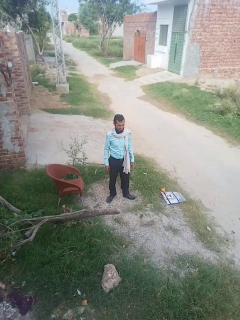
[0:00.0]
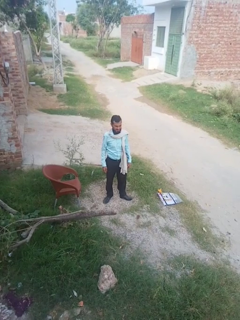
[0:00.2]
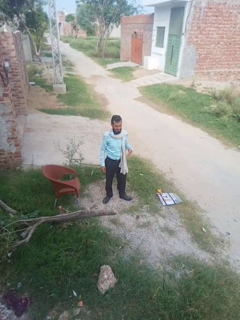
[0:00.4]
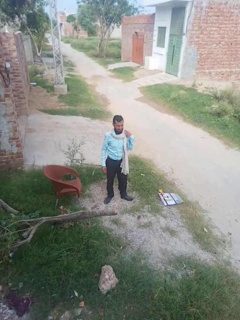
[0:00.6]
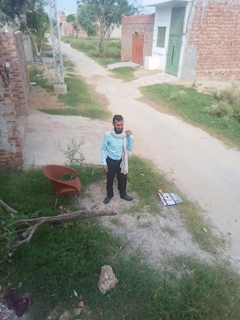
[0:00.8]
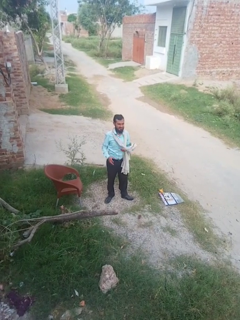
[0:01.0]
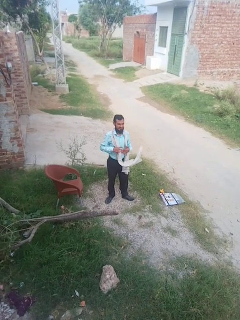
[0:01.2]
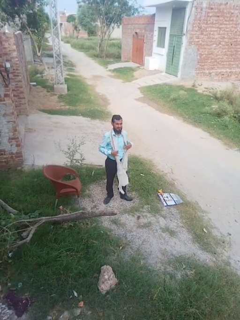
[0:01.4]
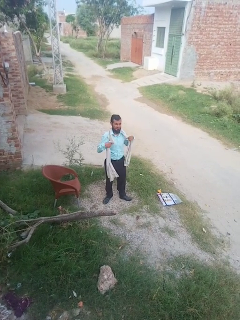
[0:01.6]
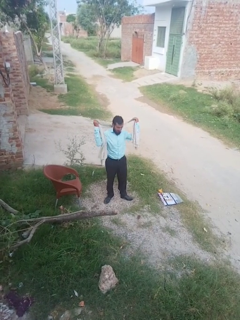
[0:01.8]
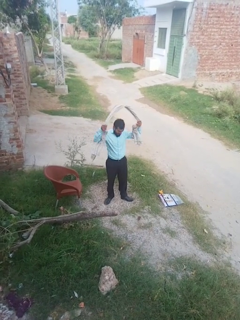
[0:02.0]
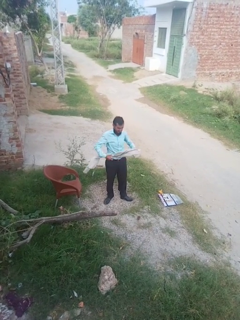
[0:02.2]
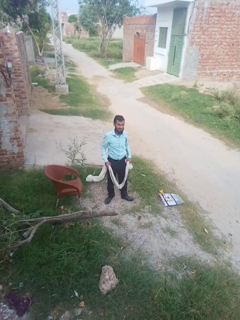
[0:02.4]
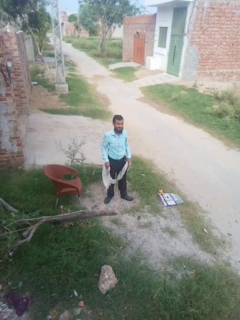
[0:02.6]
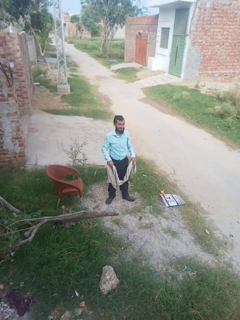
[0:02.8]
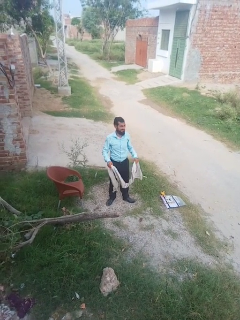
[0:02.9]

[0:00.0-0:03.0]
person takes off scarf

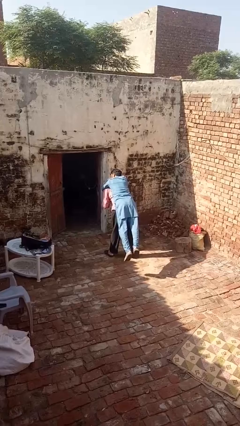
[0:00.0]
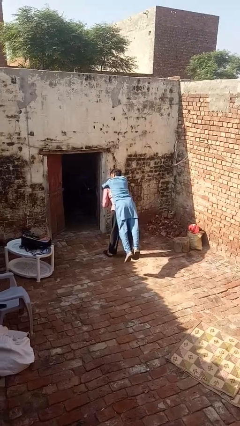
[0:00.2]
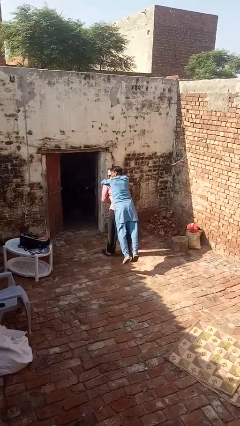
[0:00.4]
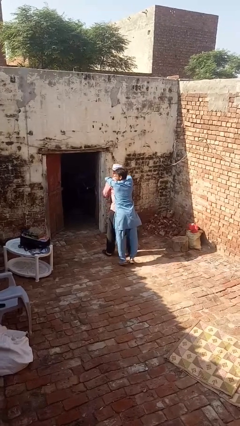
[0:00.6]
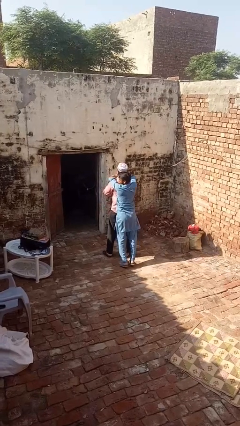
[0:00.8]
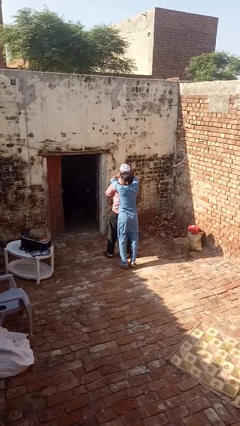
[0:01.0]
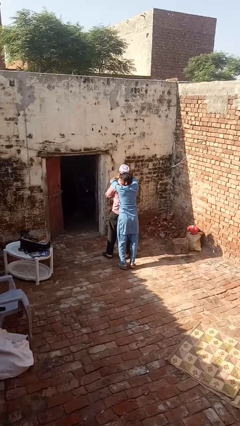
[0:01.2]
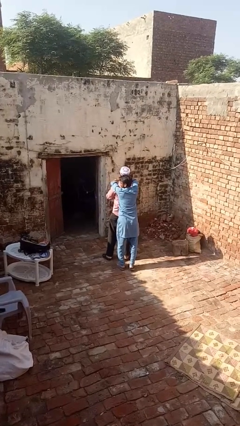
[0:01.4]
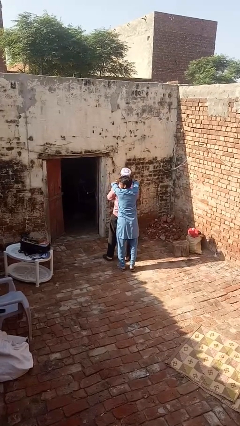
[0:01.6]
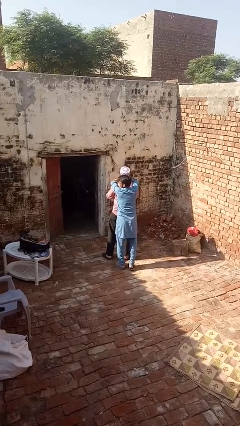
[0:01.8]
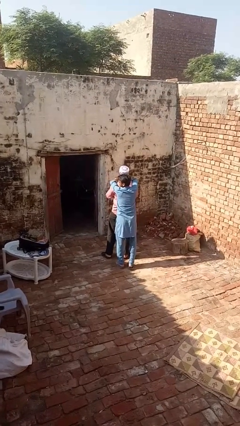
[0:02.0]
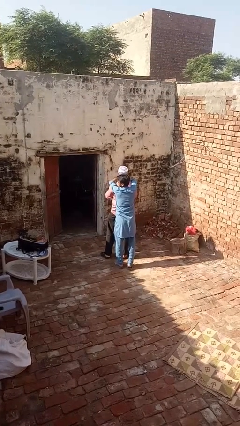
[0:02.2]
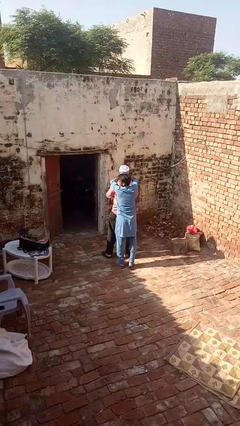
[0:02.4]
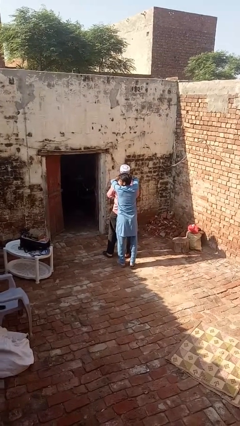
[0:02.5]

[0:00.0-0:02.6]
person puts down person

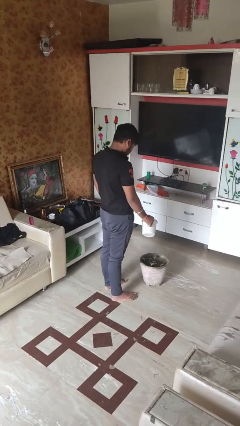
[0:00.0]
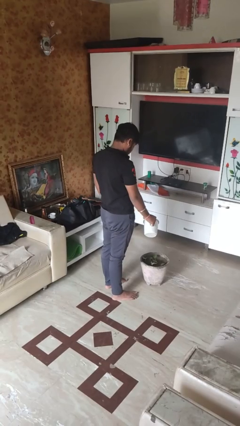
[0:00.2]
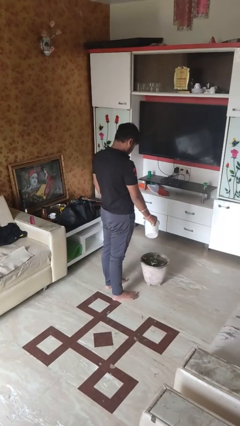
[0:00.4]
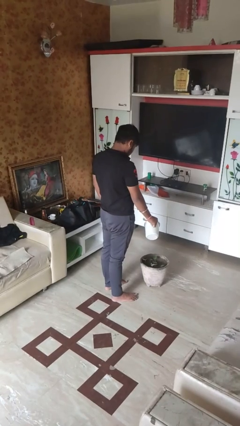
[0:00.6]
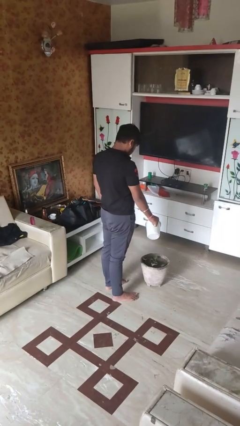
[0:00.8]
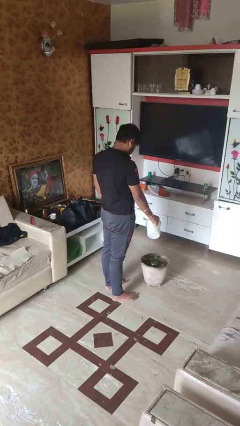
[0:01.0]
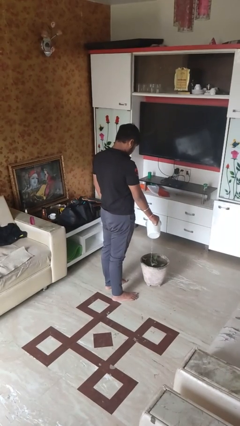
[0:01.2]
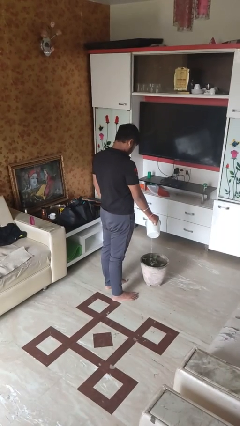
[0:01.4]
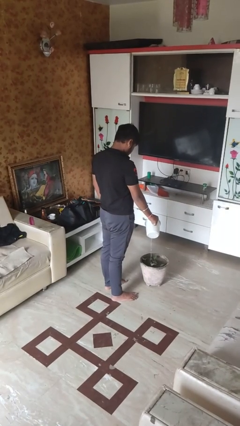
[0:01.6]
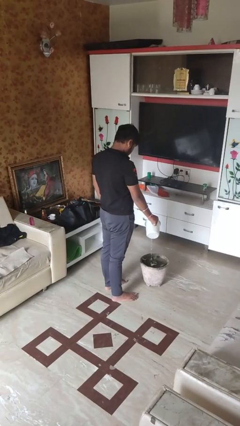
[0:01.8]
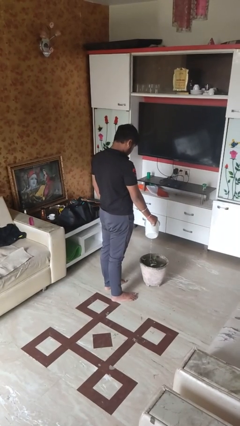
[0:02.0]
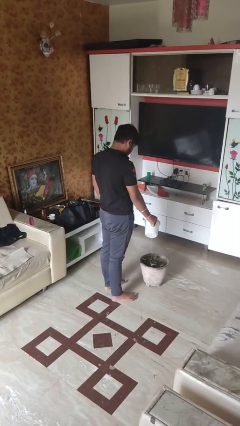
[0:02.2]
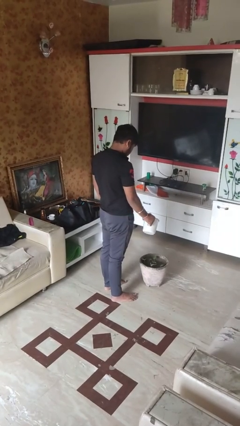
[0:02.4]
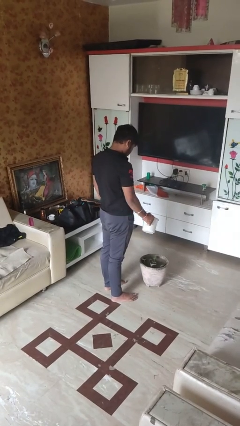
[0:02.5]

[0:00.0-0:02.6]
person waters houseplant

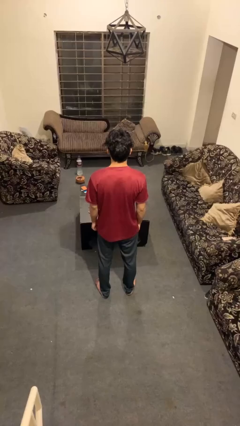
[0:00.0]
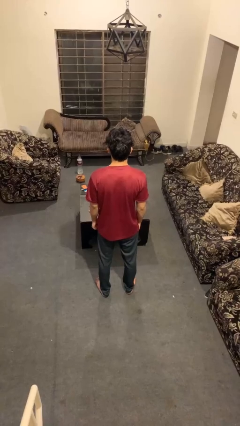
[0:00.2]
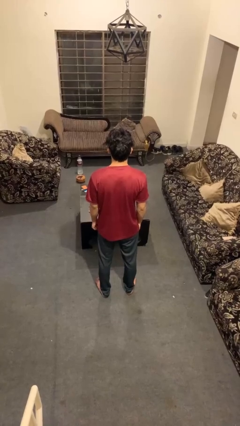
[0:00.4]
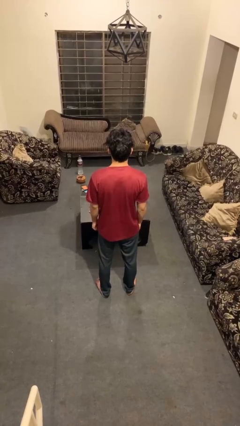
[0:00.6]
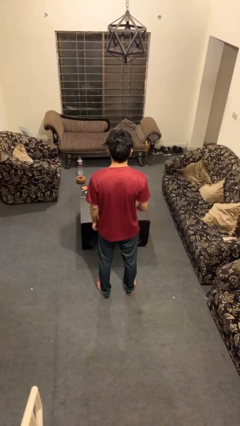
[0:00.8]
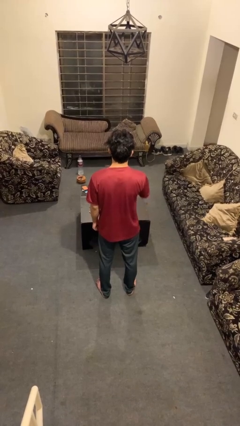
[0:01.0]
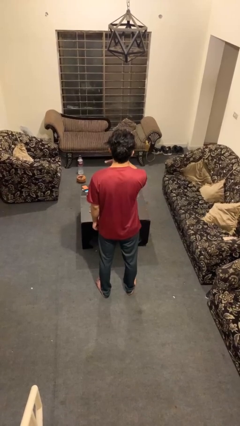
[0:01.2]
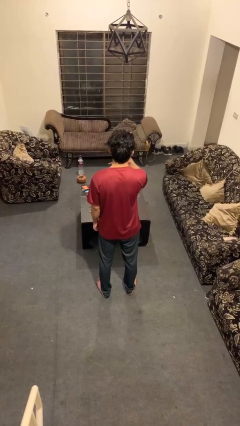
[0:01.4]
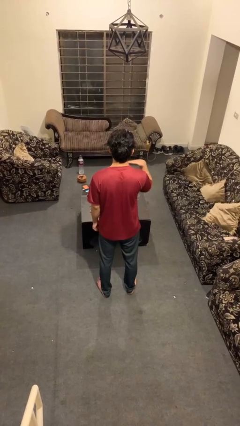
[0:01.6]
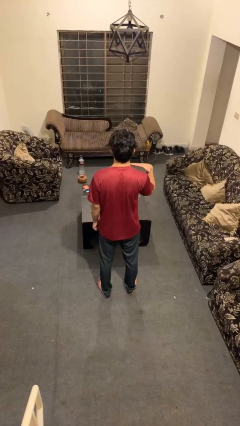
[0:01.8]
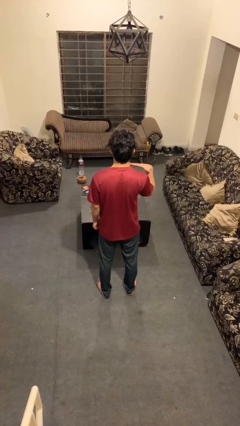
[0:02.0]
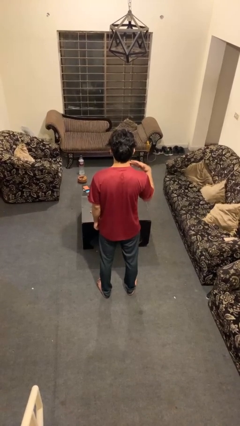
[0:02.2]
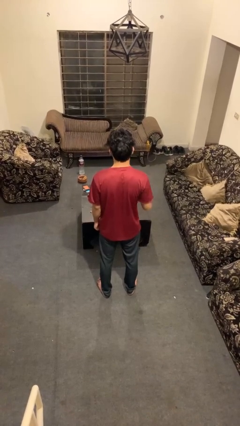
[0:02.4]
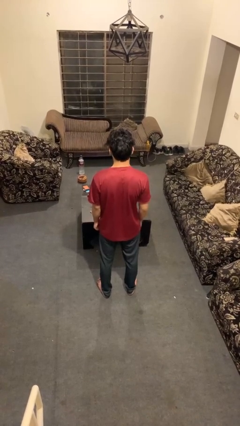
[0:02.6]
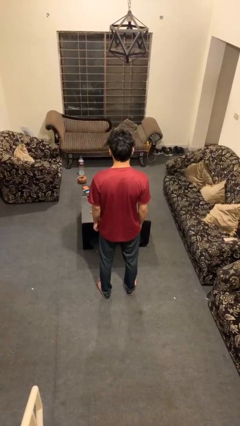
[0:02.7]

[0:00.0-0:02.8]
person gestures cut

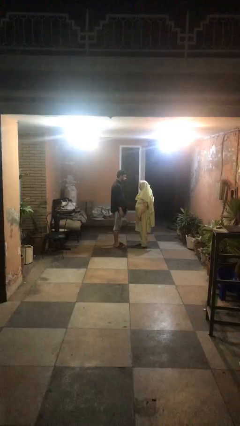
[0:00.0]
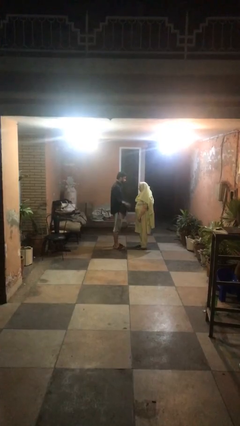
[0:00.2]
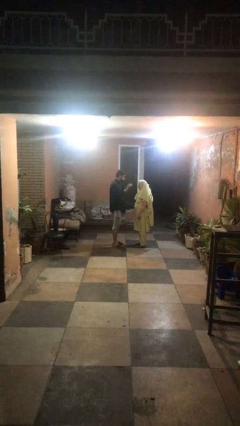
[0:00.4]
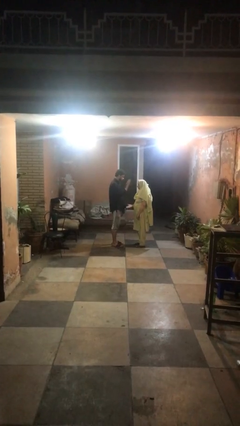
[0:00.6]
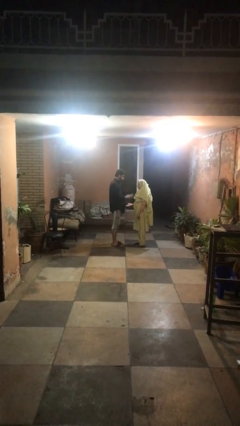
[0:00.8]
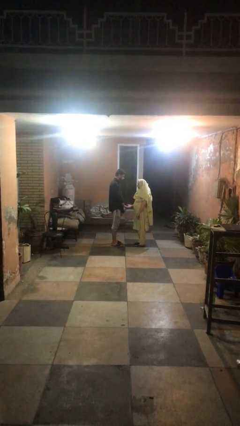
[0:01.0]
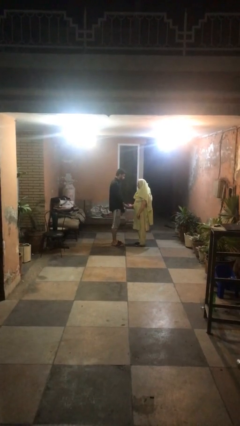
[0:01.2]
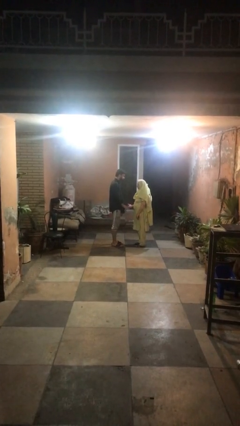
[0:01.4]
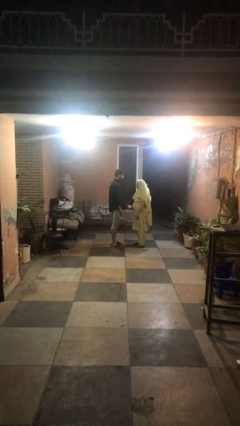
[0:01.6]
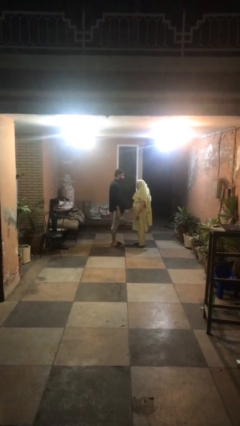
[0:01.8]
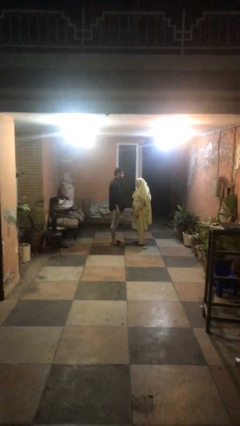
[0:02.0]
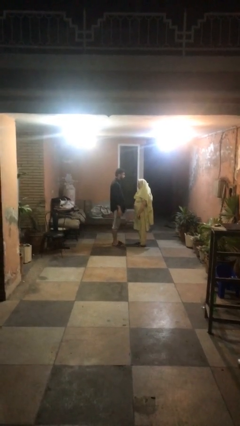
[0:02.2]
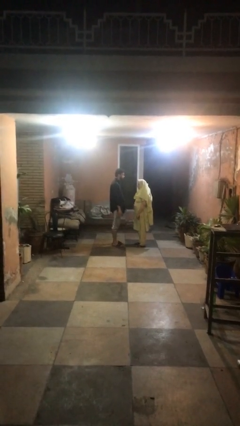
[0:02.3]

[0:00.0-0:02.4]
person highfives hand

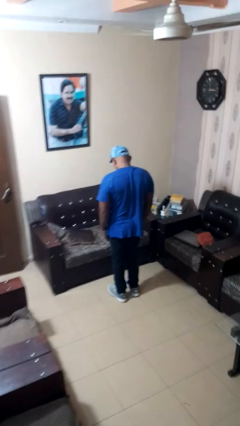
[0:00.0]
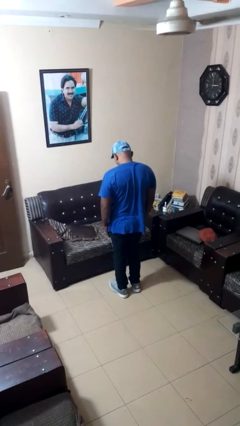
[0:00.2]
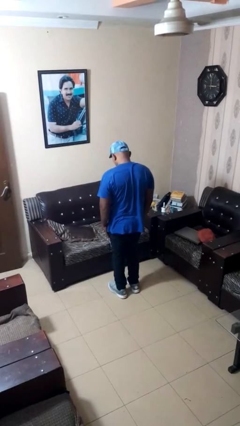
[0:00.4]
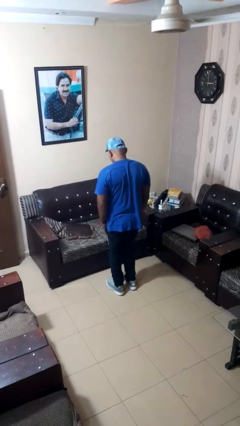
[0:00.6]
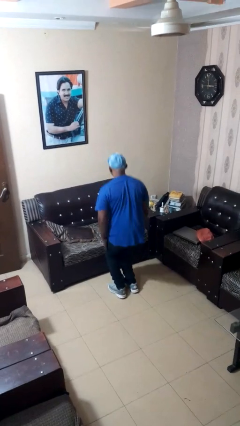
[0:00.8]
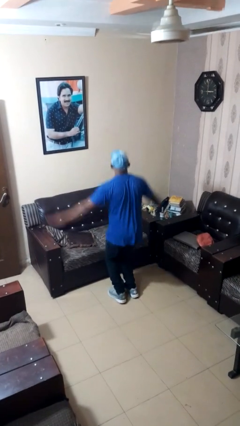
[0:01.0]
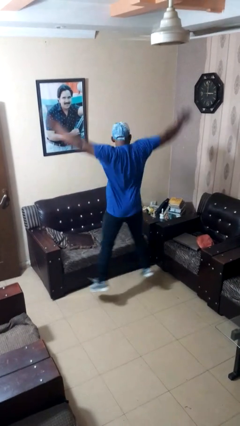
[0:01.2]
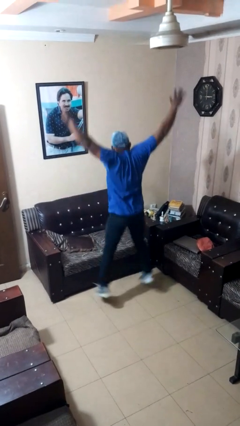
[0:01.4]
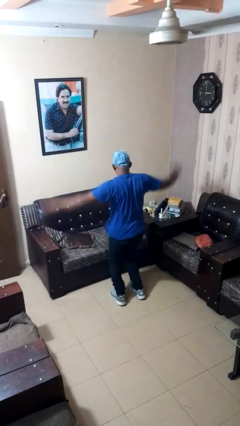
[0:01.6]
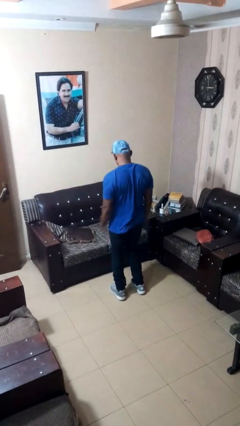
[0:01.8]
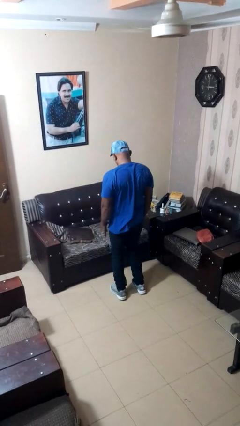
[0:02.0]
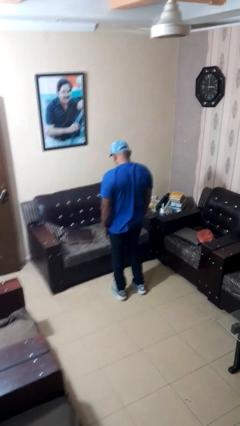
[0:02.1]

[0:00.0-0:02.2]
person exercises with jumping jacks

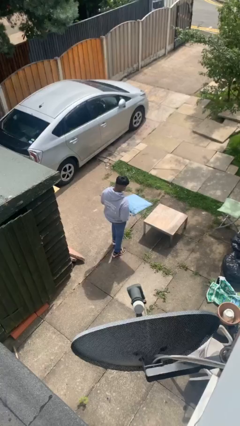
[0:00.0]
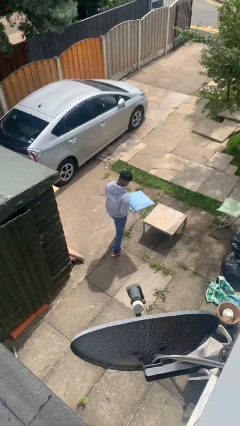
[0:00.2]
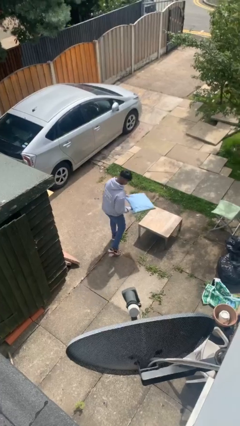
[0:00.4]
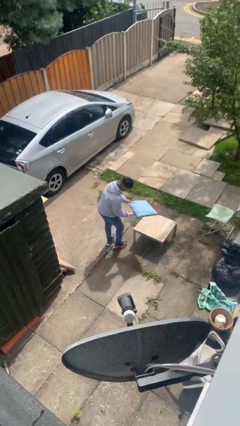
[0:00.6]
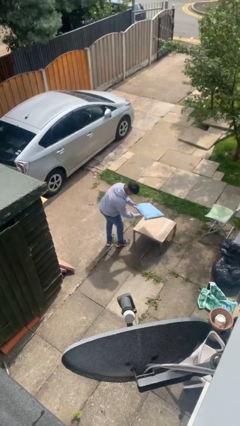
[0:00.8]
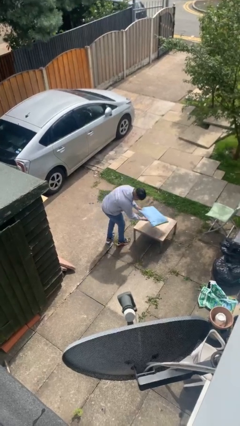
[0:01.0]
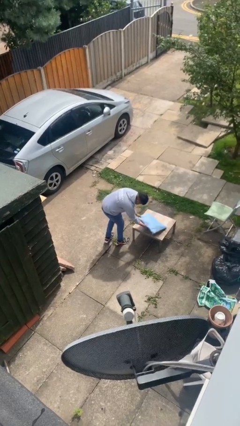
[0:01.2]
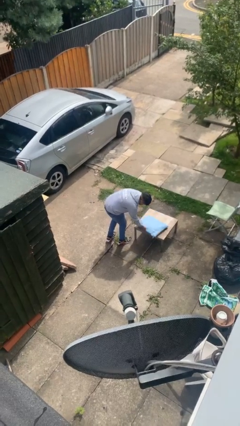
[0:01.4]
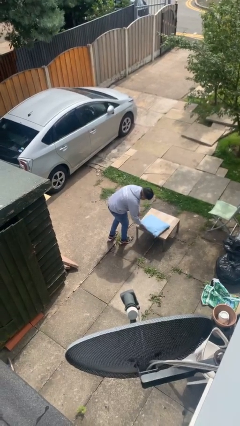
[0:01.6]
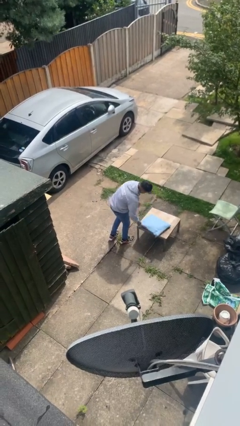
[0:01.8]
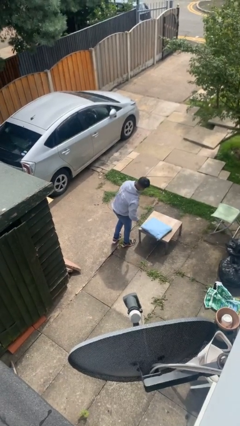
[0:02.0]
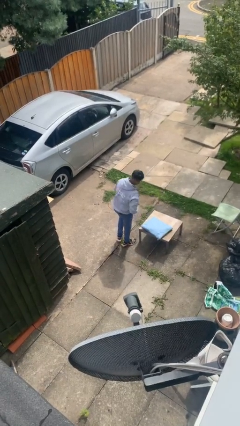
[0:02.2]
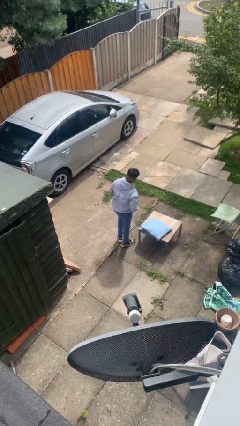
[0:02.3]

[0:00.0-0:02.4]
person puts down object on table
